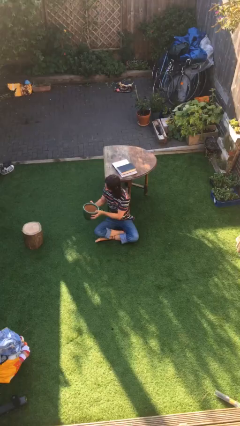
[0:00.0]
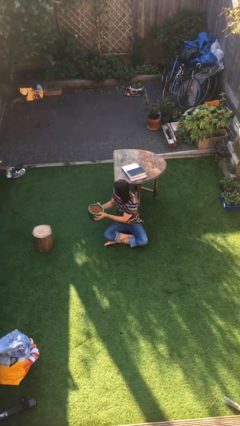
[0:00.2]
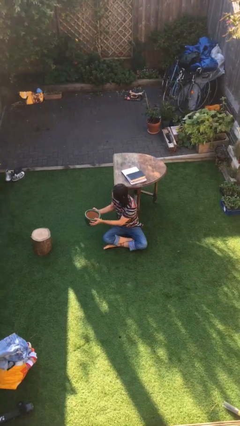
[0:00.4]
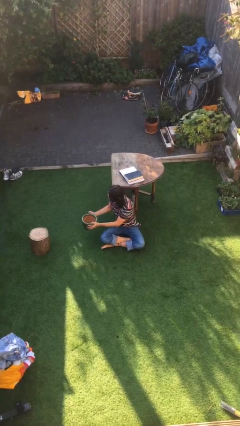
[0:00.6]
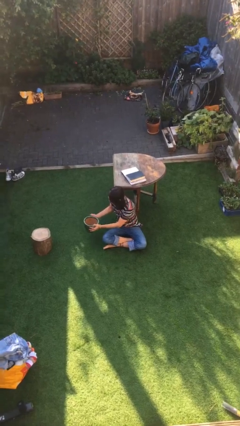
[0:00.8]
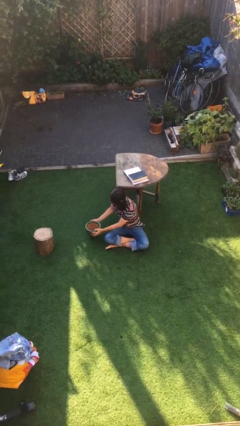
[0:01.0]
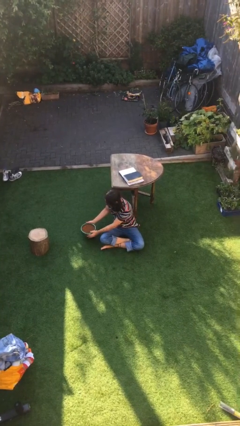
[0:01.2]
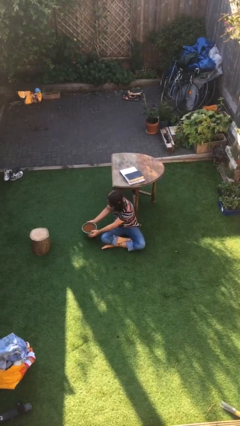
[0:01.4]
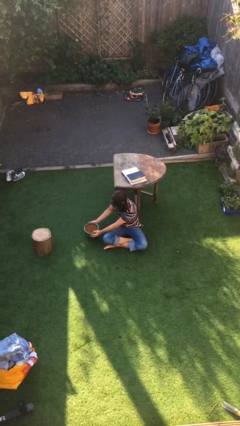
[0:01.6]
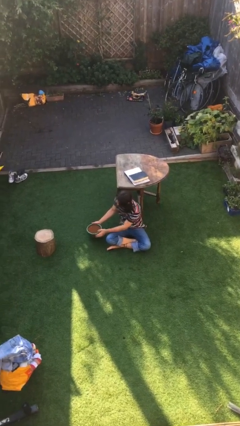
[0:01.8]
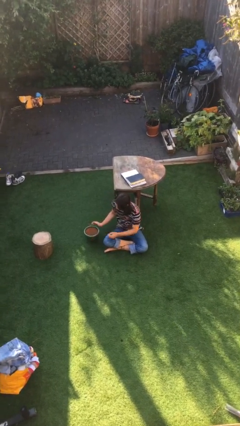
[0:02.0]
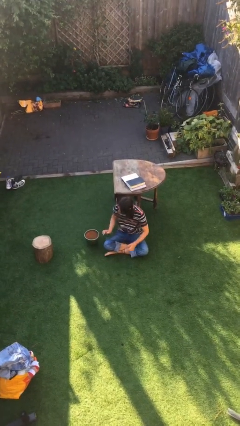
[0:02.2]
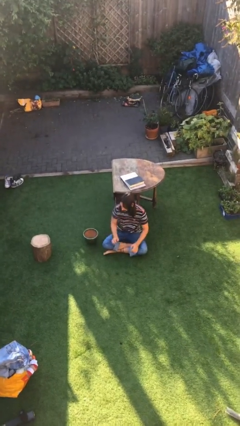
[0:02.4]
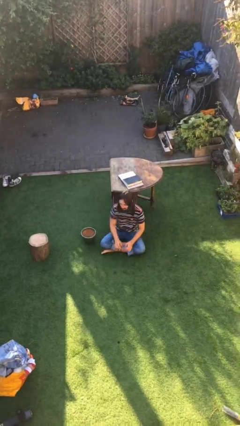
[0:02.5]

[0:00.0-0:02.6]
person puts down object on floor

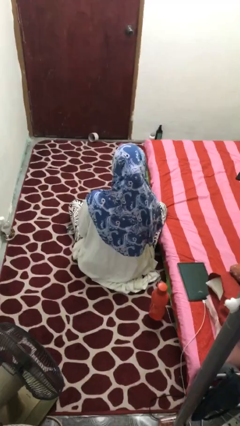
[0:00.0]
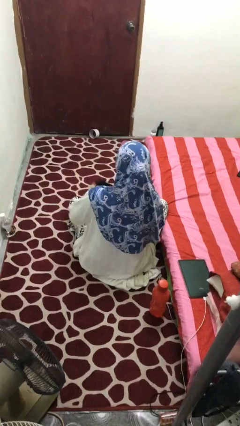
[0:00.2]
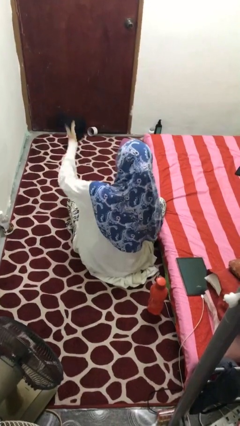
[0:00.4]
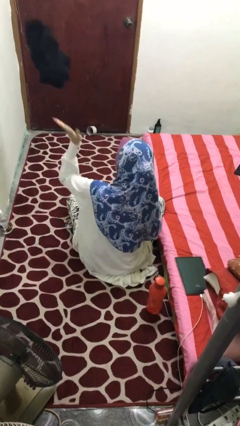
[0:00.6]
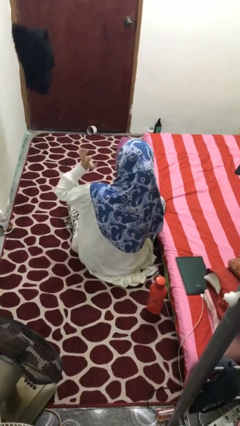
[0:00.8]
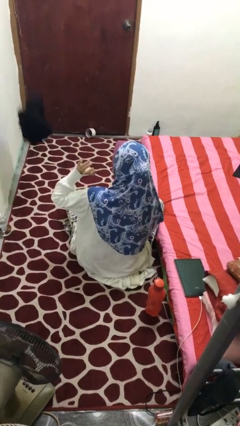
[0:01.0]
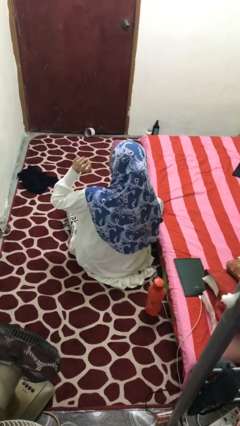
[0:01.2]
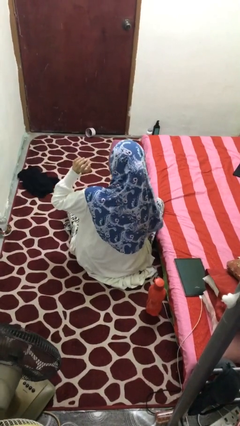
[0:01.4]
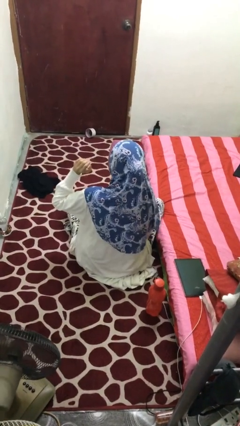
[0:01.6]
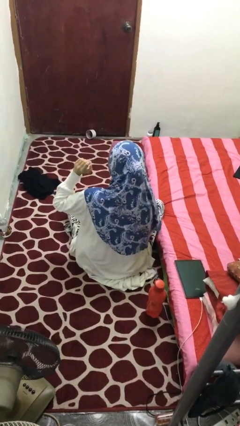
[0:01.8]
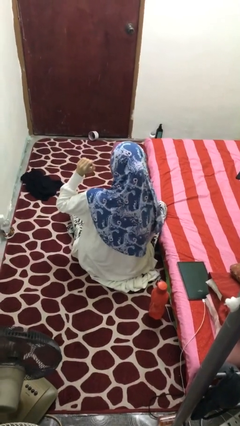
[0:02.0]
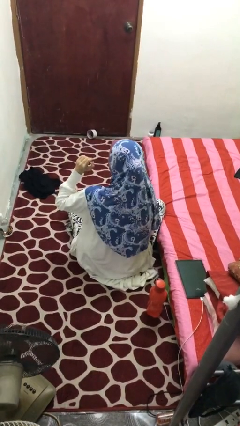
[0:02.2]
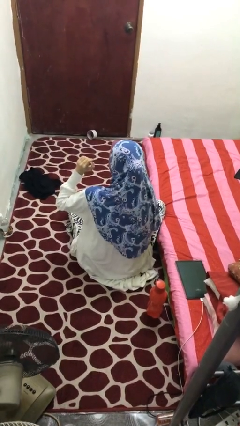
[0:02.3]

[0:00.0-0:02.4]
person throws object into air

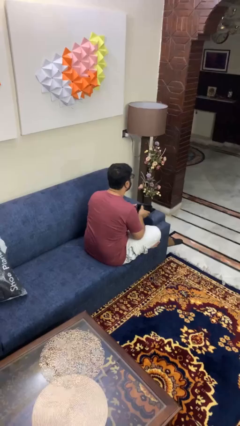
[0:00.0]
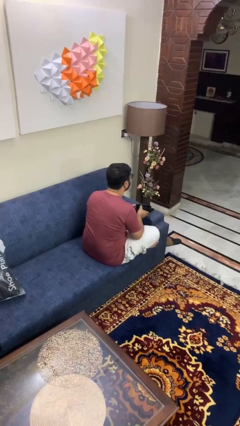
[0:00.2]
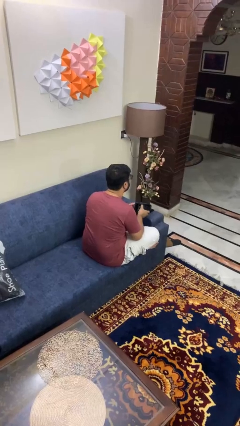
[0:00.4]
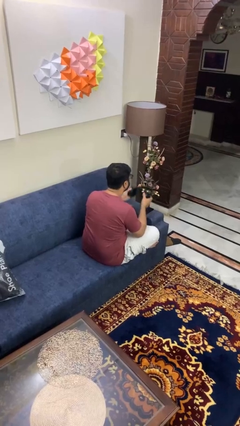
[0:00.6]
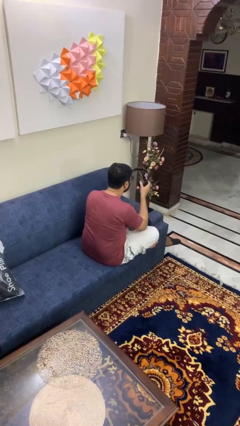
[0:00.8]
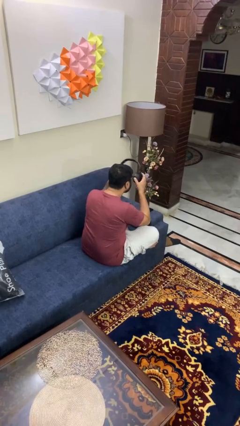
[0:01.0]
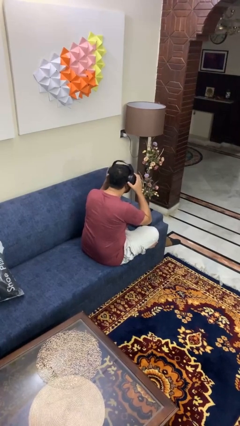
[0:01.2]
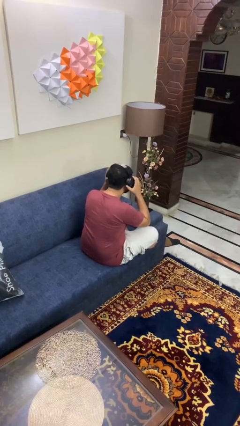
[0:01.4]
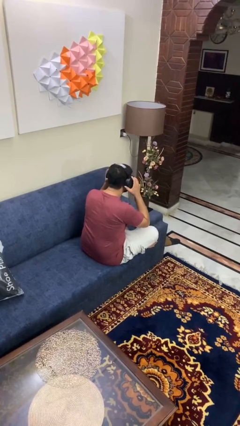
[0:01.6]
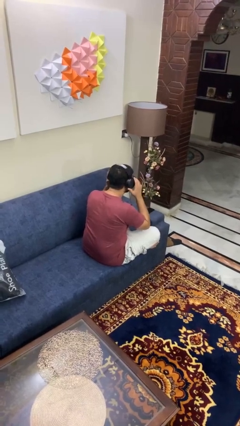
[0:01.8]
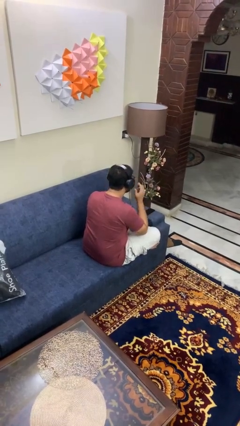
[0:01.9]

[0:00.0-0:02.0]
person puts on headphones

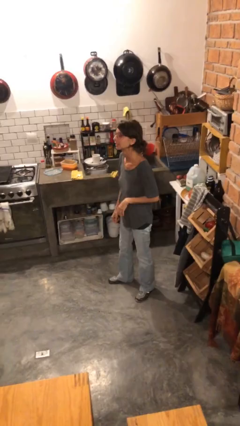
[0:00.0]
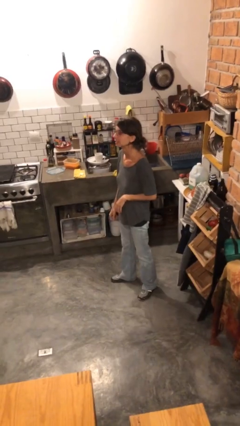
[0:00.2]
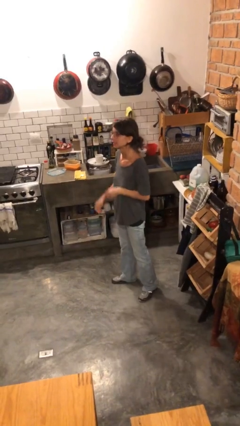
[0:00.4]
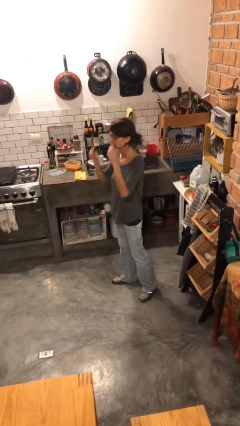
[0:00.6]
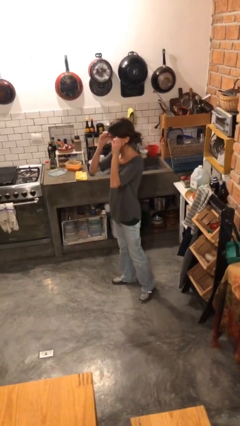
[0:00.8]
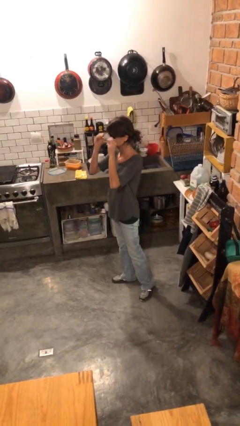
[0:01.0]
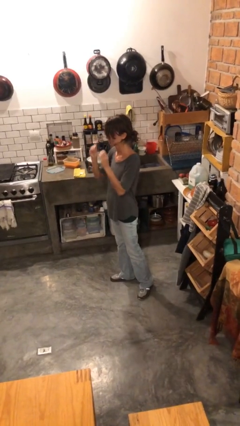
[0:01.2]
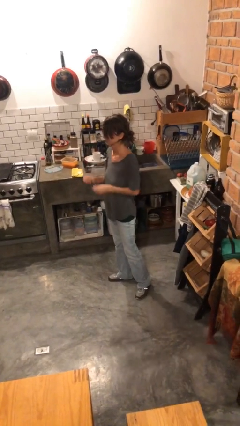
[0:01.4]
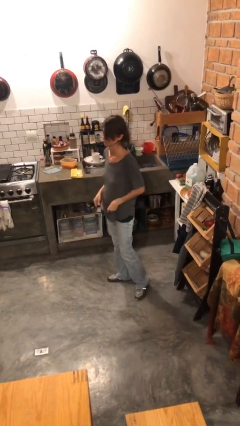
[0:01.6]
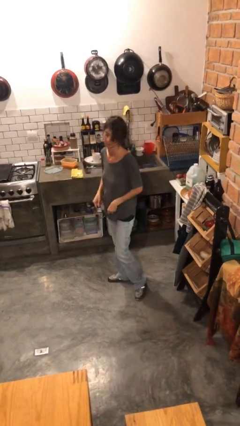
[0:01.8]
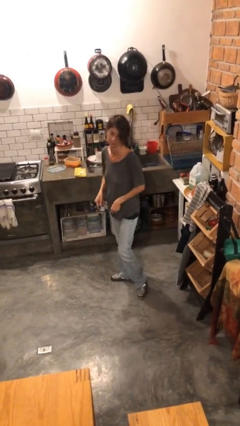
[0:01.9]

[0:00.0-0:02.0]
person takes off glasses

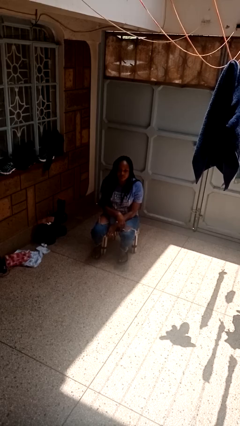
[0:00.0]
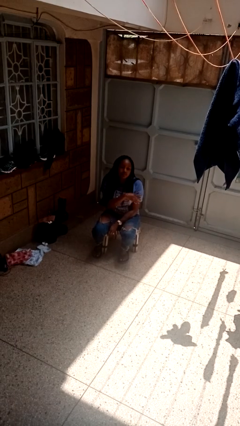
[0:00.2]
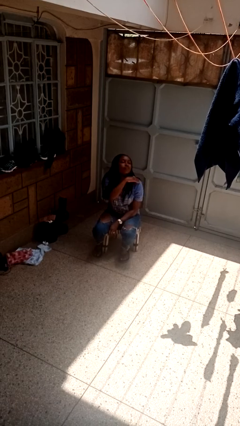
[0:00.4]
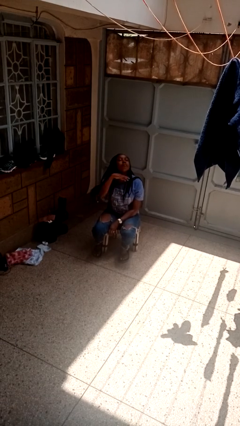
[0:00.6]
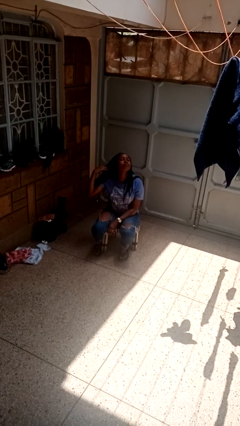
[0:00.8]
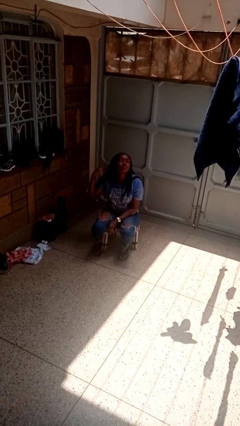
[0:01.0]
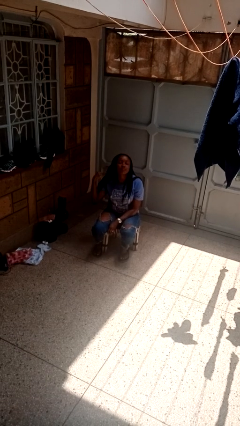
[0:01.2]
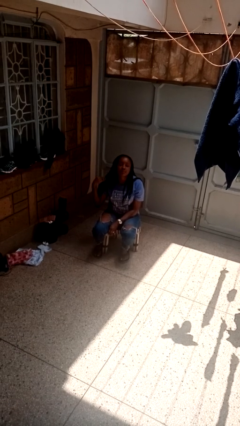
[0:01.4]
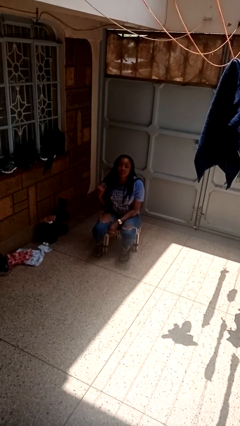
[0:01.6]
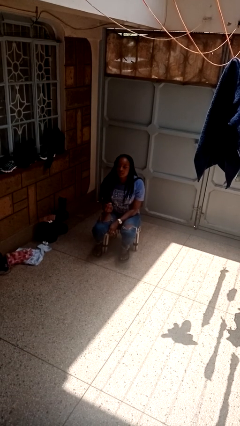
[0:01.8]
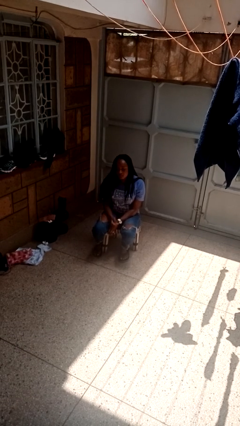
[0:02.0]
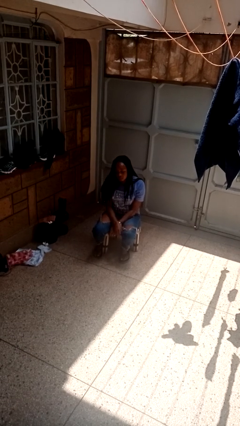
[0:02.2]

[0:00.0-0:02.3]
person gestures cut

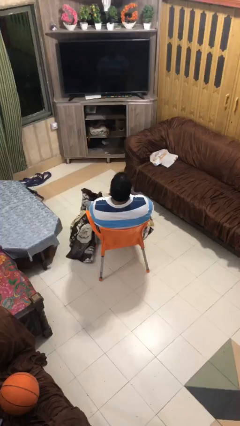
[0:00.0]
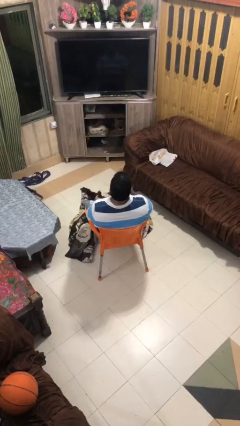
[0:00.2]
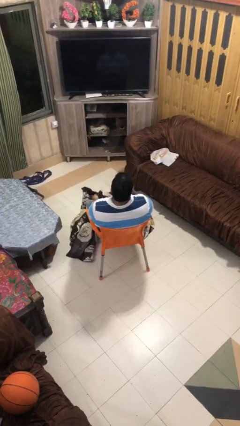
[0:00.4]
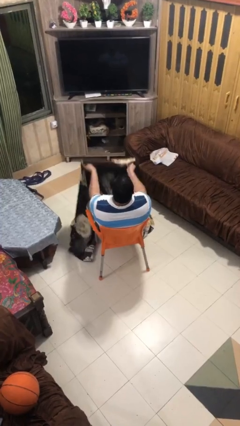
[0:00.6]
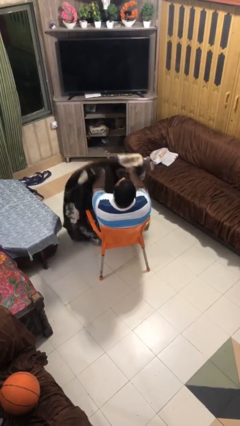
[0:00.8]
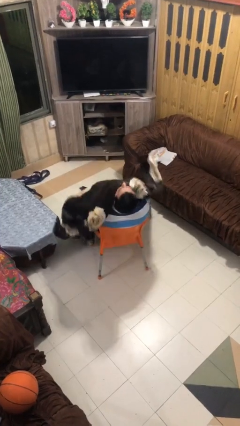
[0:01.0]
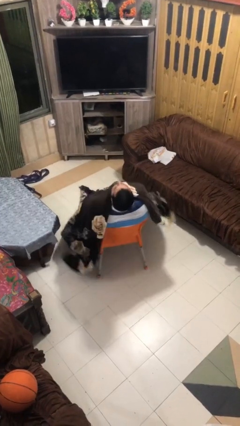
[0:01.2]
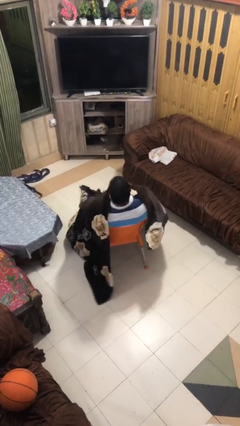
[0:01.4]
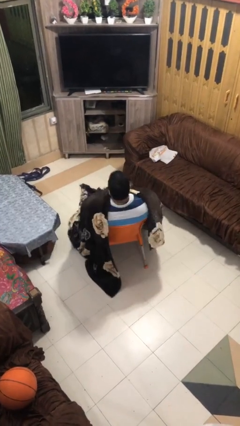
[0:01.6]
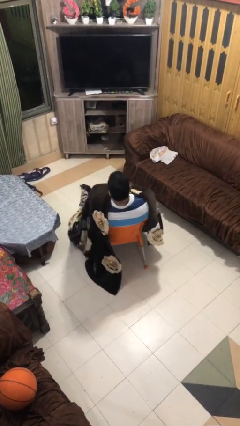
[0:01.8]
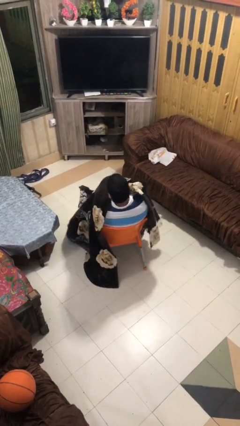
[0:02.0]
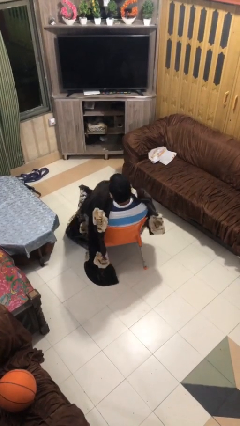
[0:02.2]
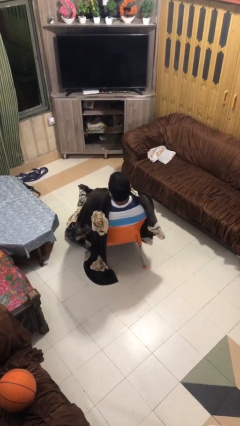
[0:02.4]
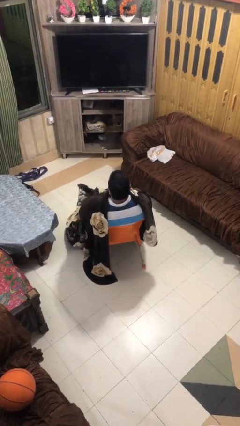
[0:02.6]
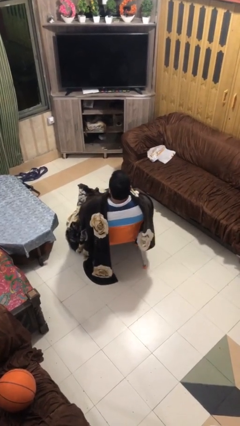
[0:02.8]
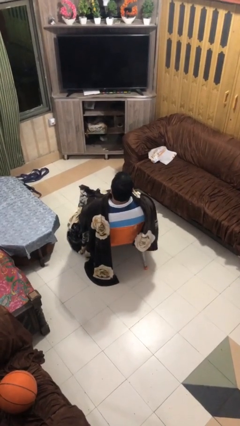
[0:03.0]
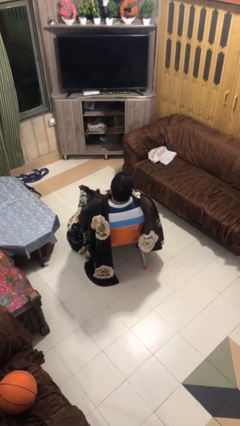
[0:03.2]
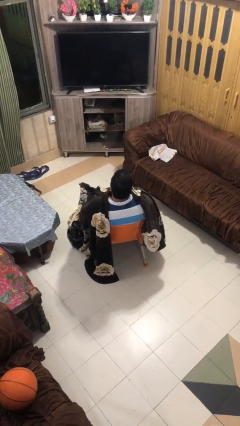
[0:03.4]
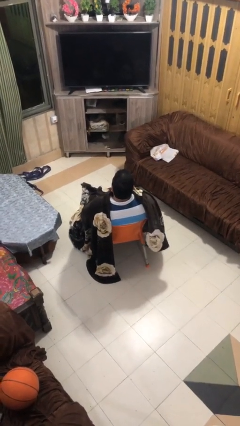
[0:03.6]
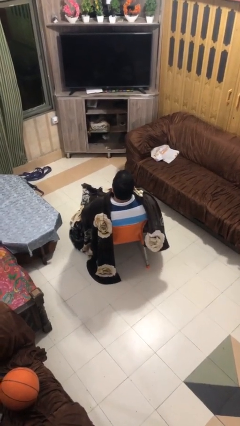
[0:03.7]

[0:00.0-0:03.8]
person covers with blanket

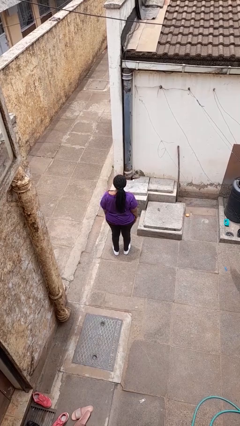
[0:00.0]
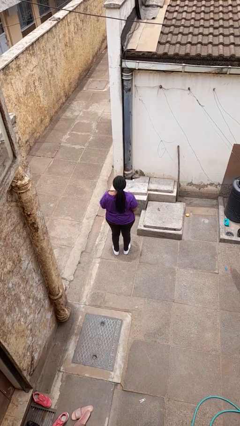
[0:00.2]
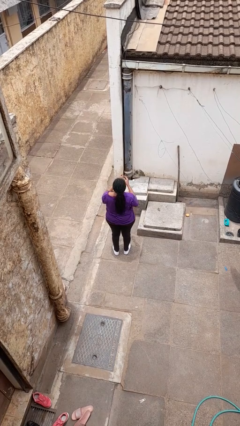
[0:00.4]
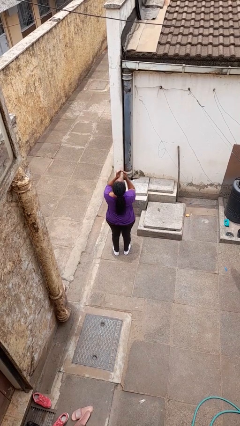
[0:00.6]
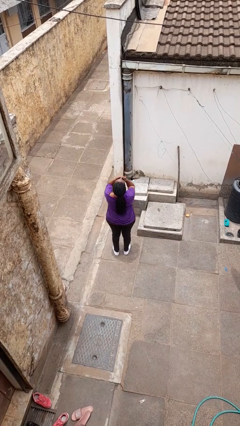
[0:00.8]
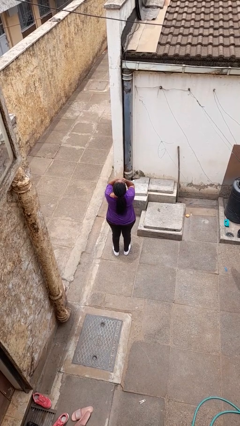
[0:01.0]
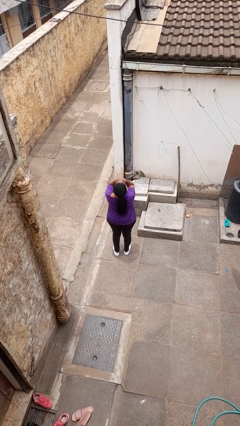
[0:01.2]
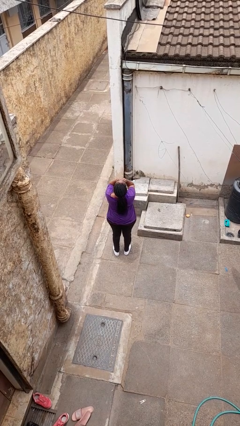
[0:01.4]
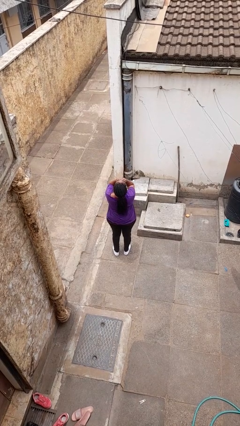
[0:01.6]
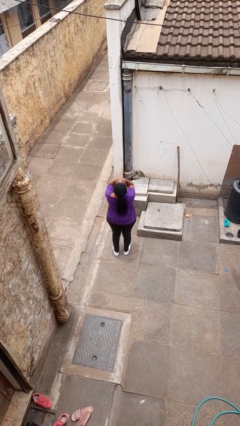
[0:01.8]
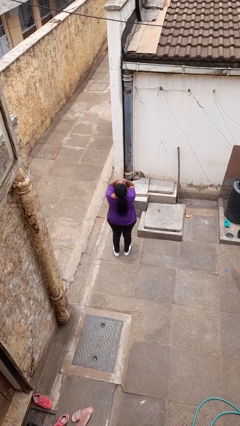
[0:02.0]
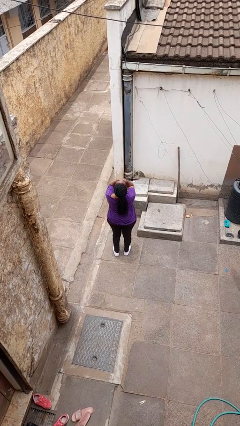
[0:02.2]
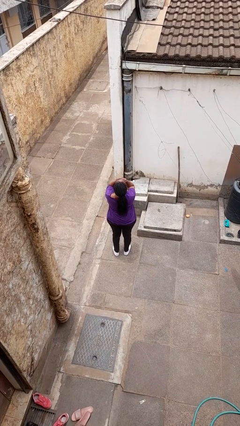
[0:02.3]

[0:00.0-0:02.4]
person covers face with hands
